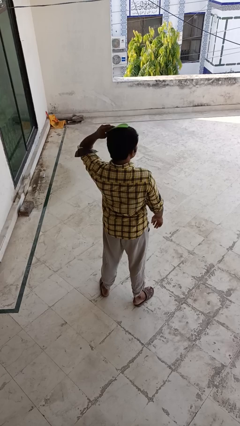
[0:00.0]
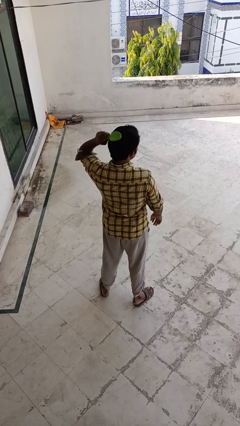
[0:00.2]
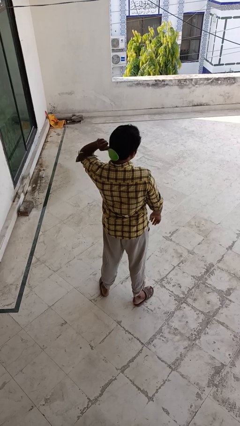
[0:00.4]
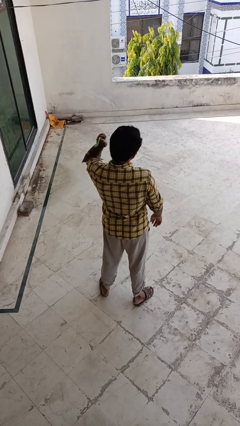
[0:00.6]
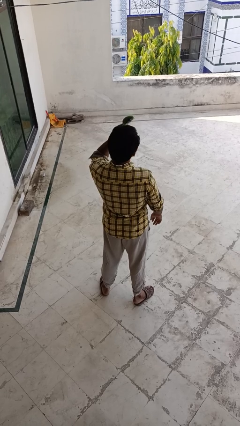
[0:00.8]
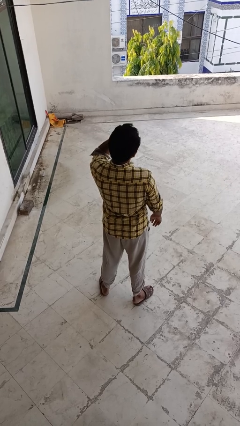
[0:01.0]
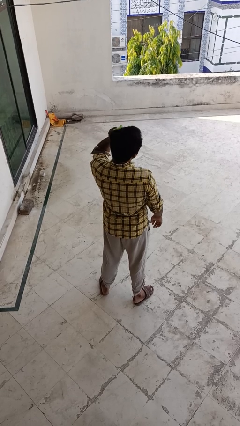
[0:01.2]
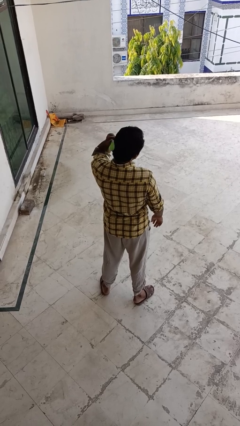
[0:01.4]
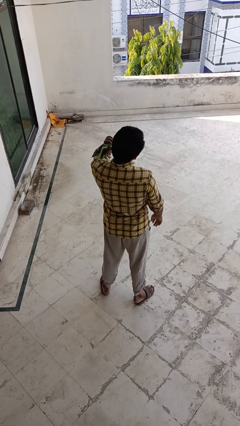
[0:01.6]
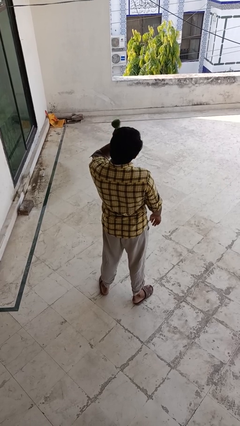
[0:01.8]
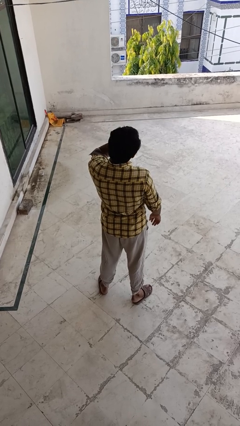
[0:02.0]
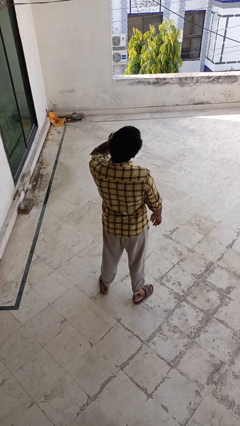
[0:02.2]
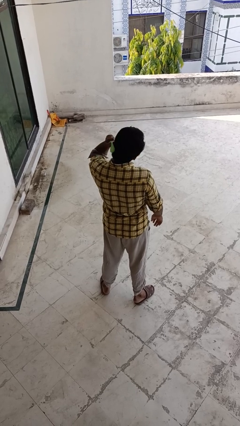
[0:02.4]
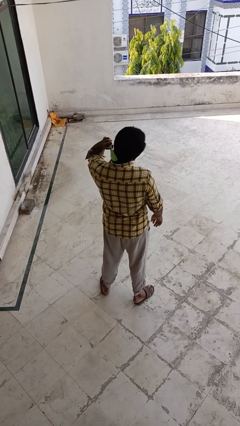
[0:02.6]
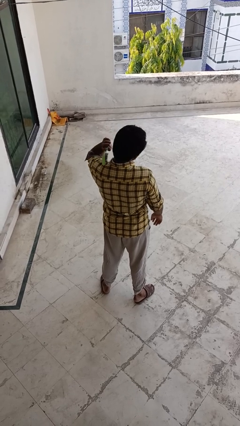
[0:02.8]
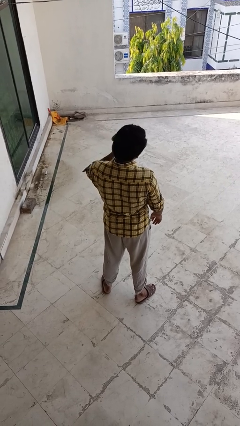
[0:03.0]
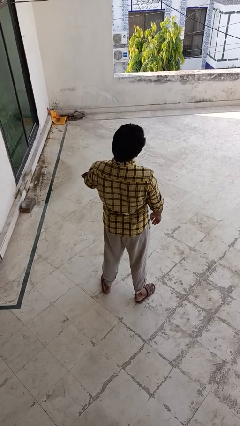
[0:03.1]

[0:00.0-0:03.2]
person brushes hair

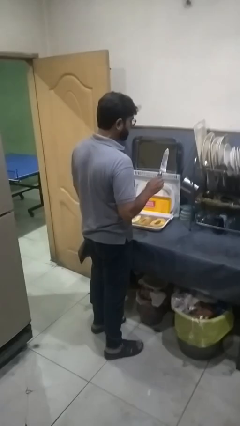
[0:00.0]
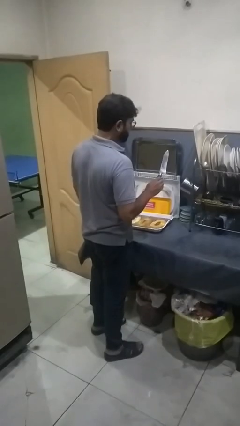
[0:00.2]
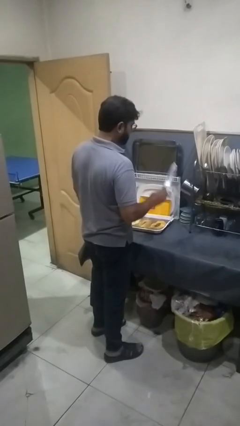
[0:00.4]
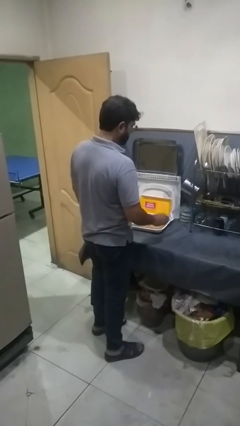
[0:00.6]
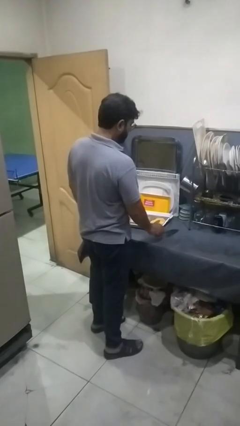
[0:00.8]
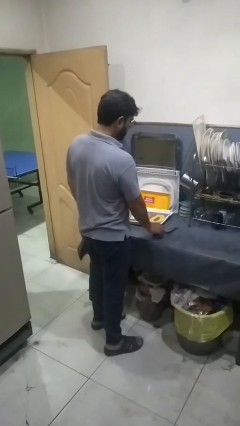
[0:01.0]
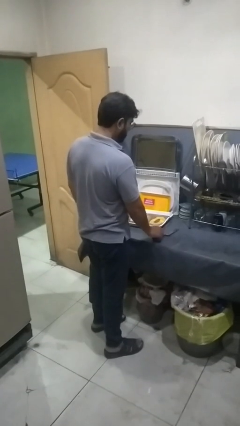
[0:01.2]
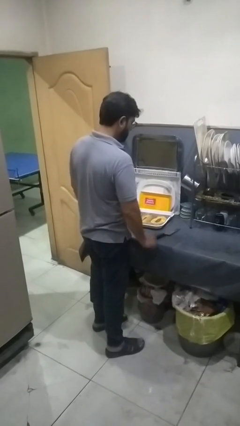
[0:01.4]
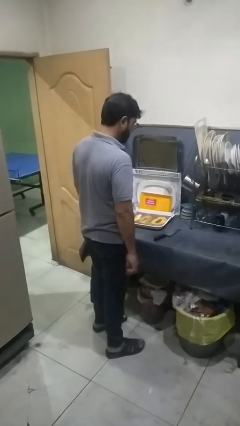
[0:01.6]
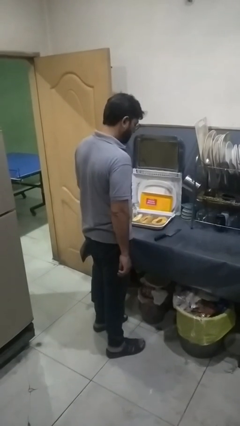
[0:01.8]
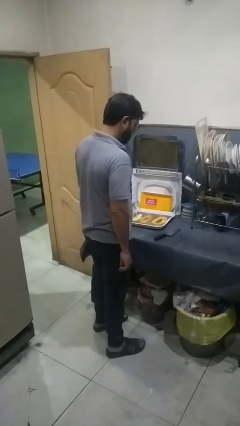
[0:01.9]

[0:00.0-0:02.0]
person puts down object on countertop

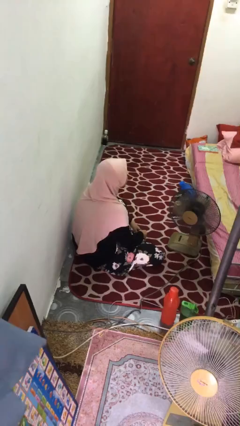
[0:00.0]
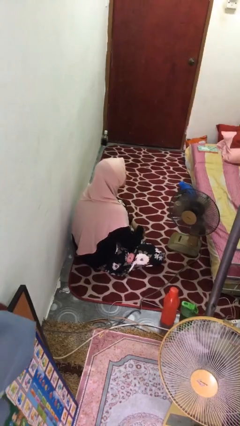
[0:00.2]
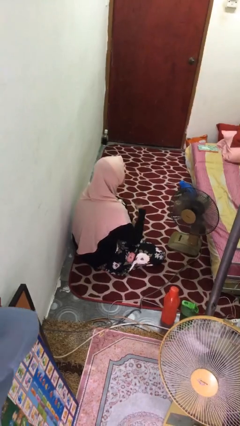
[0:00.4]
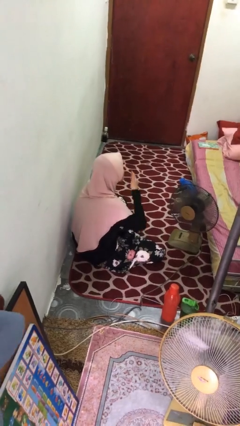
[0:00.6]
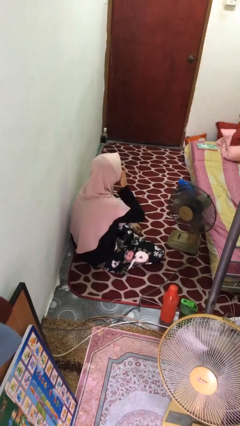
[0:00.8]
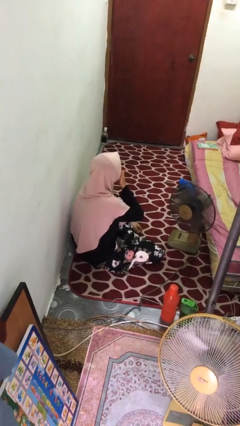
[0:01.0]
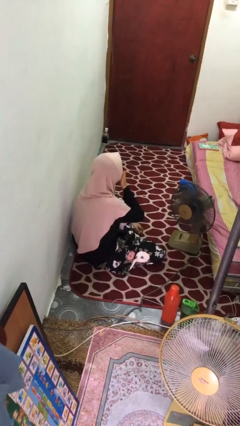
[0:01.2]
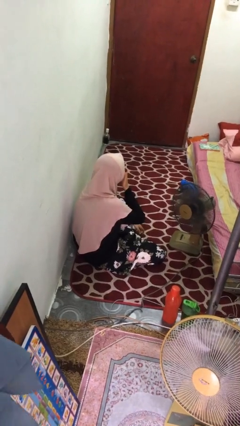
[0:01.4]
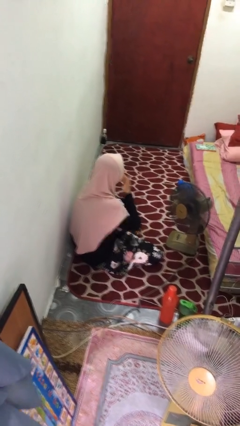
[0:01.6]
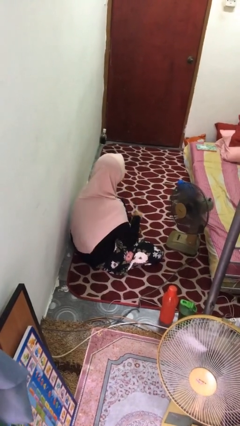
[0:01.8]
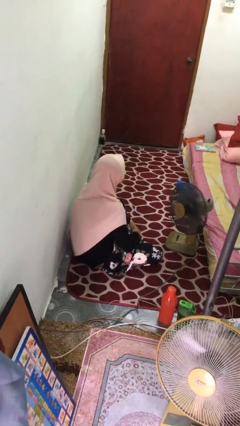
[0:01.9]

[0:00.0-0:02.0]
person yawns

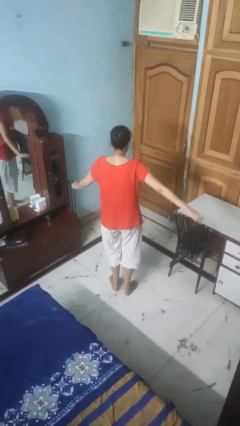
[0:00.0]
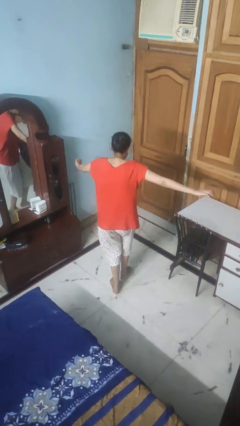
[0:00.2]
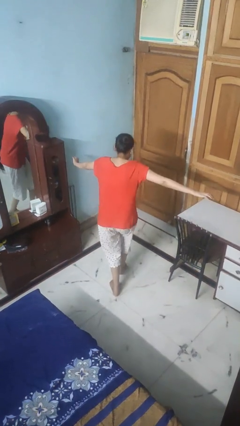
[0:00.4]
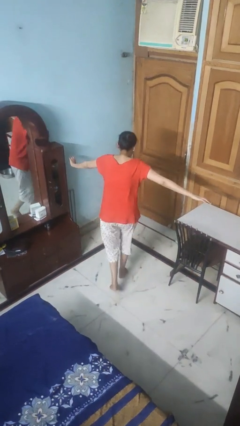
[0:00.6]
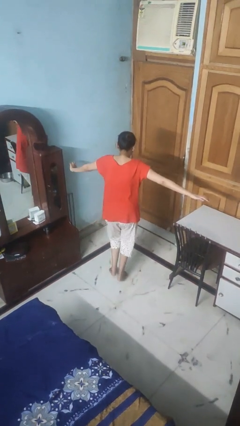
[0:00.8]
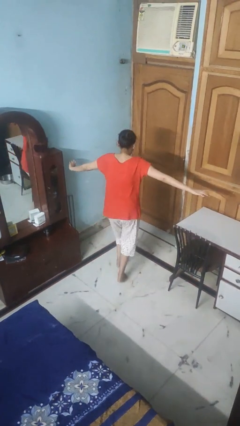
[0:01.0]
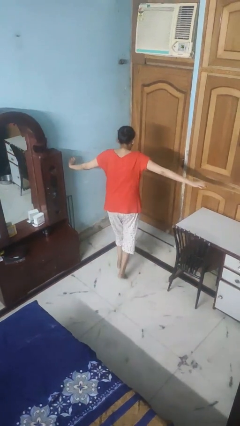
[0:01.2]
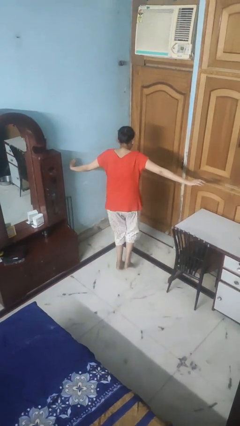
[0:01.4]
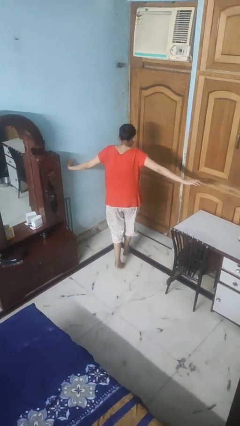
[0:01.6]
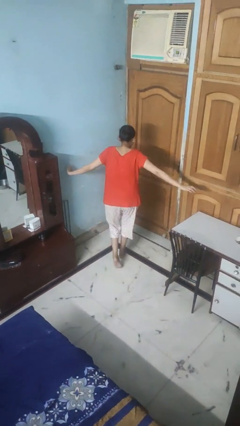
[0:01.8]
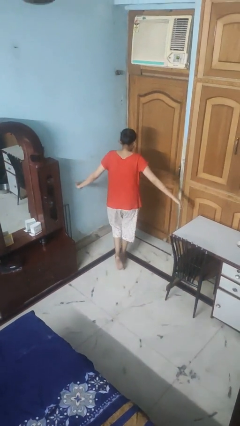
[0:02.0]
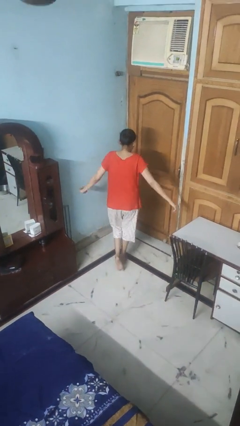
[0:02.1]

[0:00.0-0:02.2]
person walks tiptoe

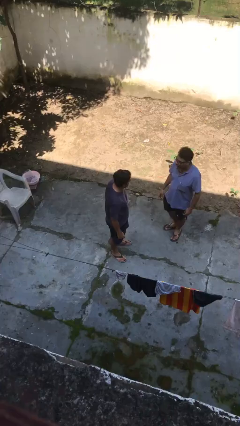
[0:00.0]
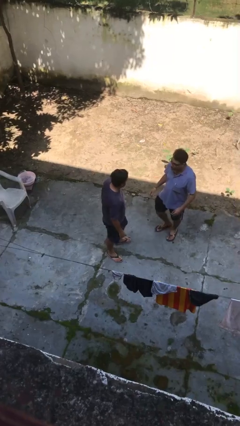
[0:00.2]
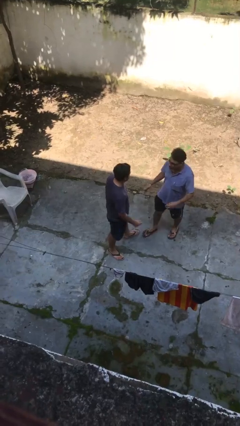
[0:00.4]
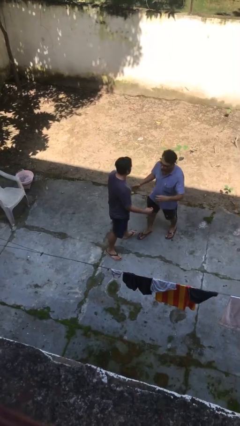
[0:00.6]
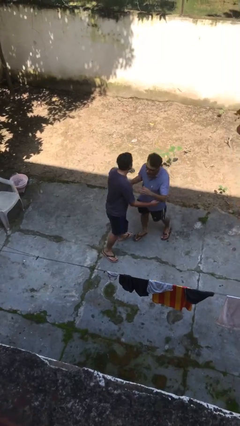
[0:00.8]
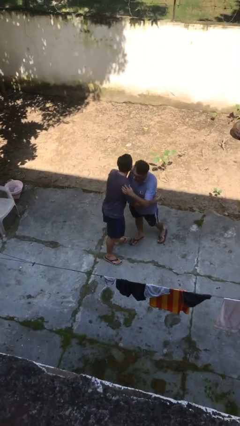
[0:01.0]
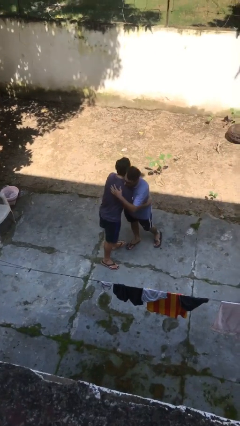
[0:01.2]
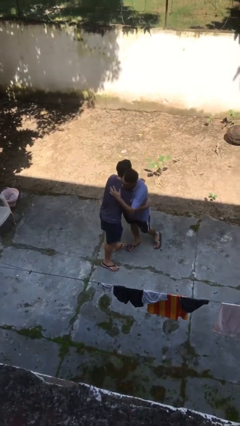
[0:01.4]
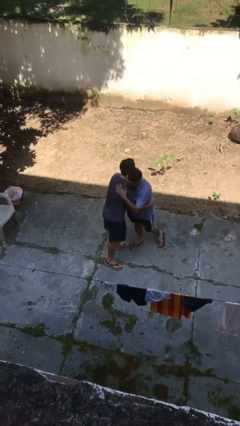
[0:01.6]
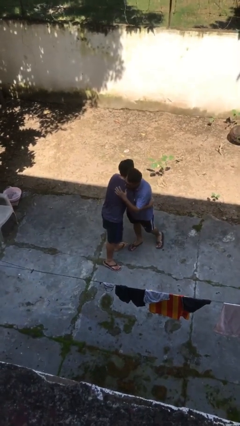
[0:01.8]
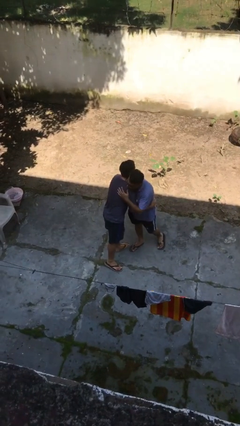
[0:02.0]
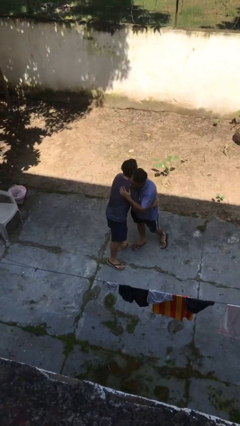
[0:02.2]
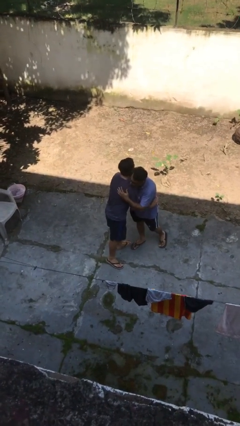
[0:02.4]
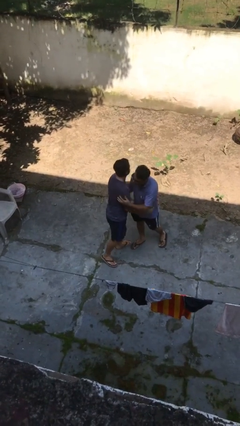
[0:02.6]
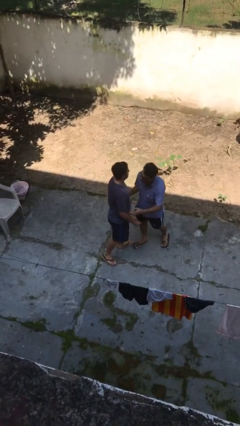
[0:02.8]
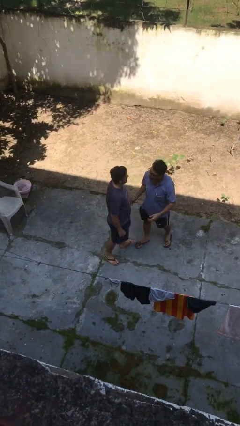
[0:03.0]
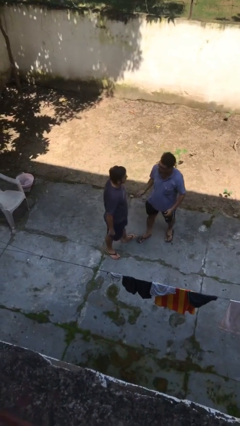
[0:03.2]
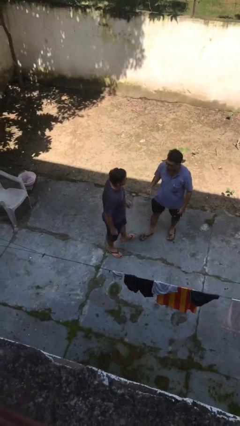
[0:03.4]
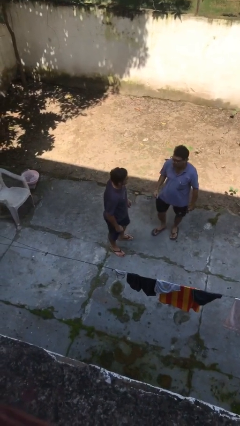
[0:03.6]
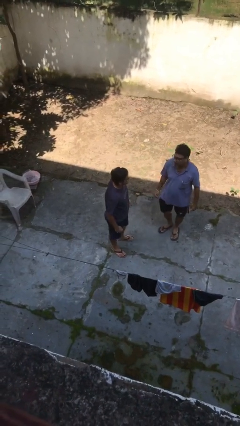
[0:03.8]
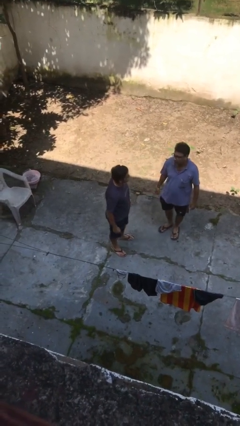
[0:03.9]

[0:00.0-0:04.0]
person embraces person

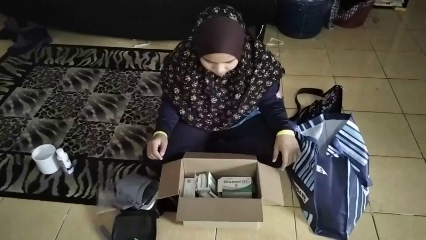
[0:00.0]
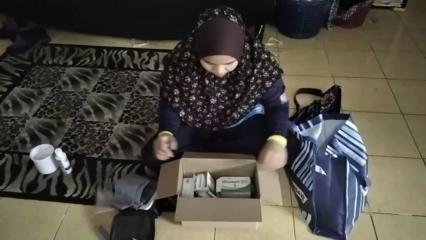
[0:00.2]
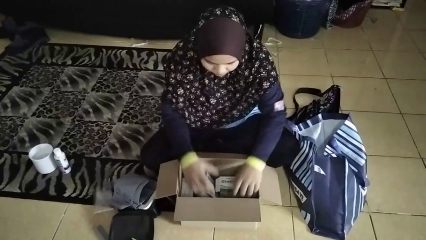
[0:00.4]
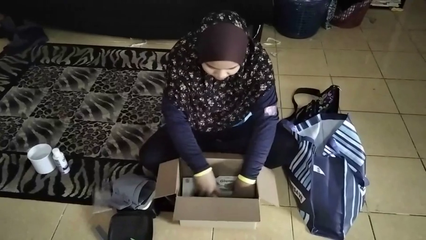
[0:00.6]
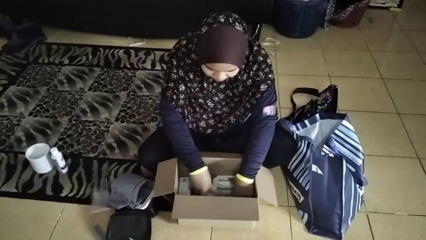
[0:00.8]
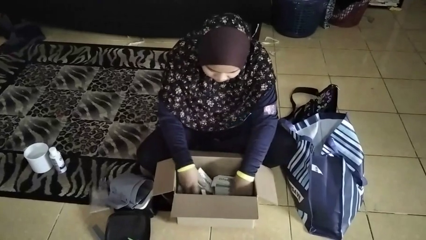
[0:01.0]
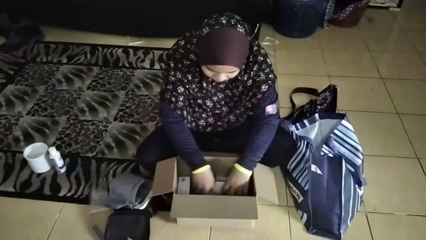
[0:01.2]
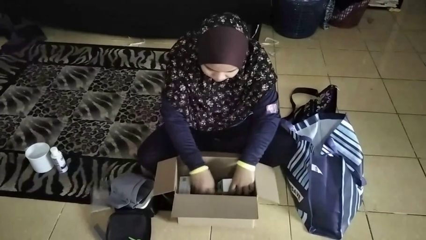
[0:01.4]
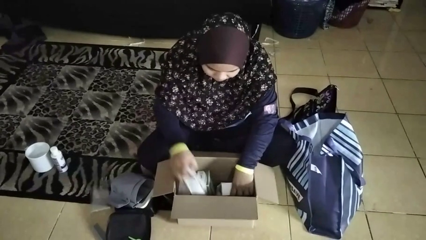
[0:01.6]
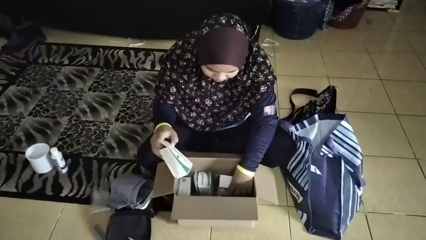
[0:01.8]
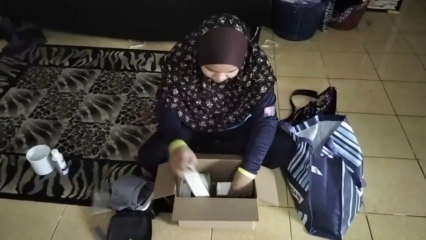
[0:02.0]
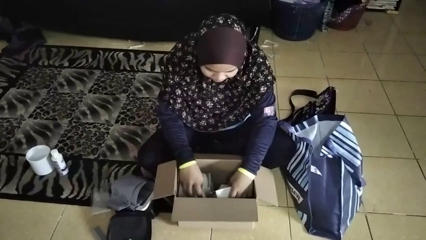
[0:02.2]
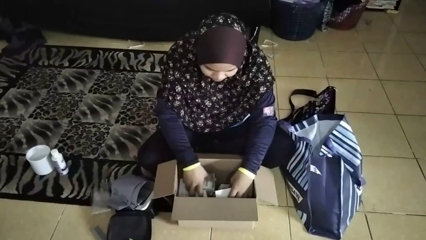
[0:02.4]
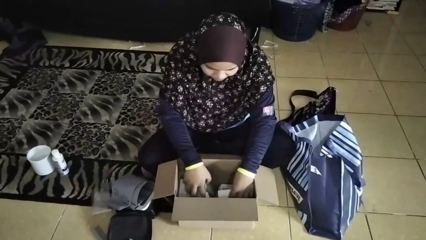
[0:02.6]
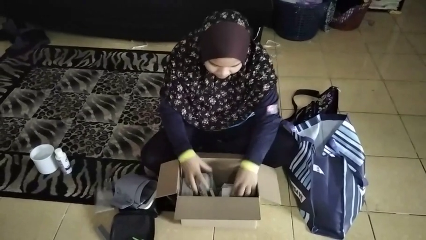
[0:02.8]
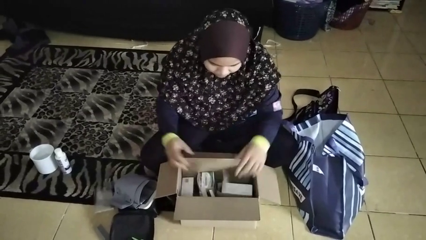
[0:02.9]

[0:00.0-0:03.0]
person searches in box

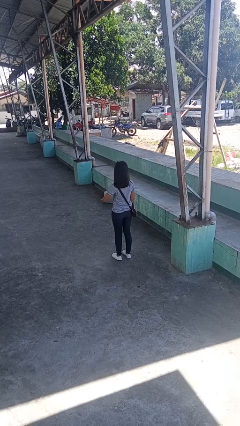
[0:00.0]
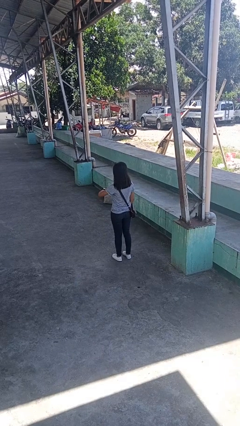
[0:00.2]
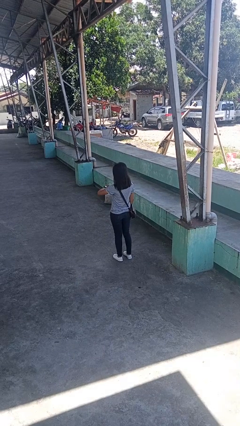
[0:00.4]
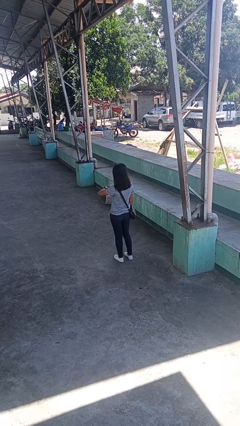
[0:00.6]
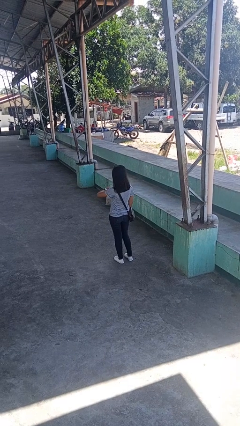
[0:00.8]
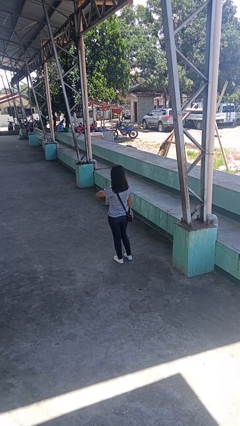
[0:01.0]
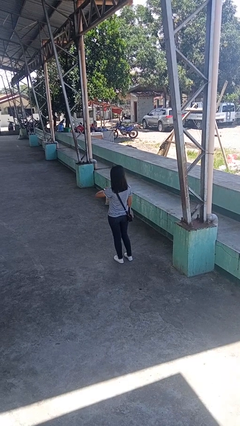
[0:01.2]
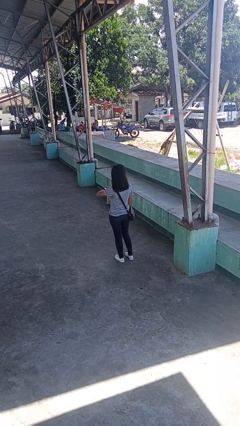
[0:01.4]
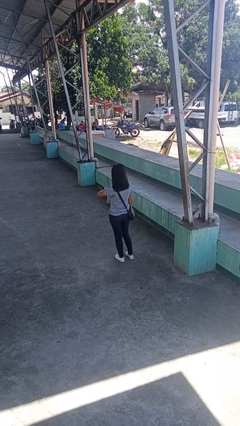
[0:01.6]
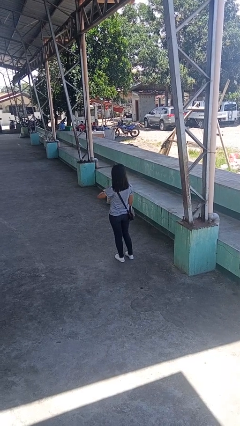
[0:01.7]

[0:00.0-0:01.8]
person looks at wristwatch
